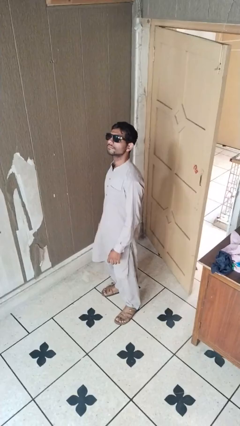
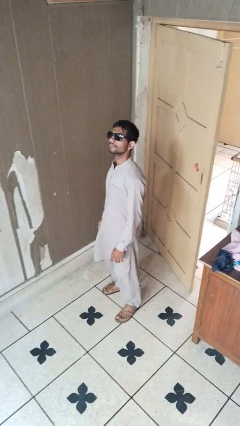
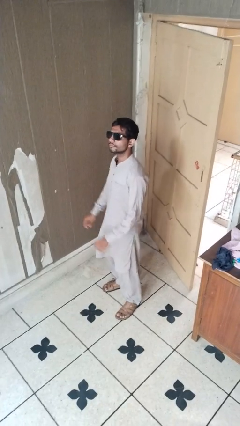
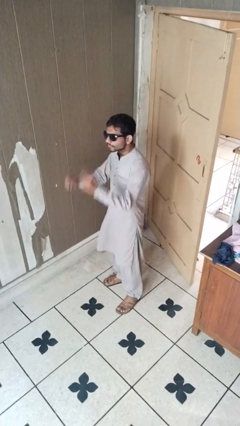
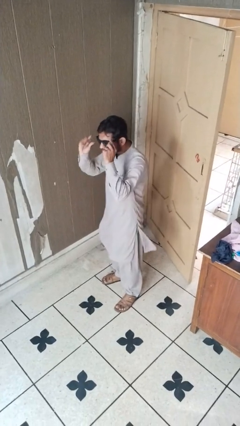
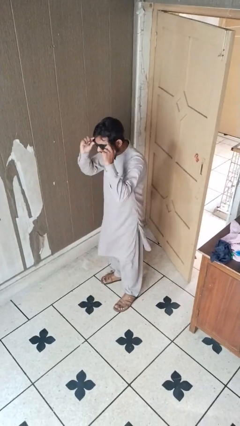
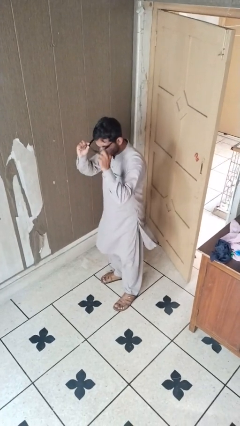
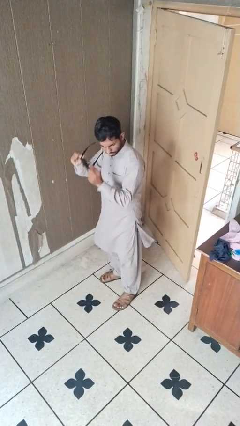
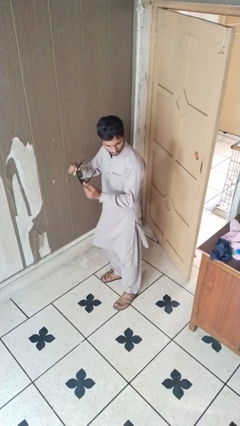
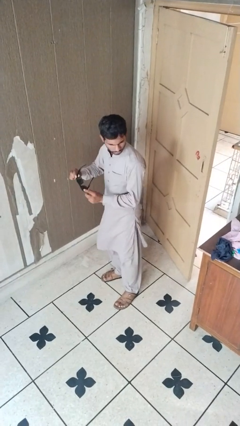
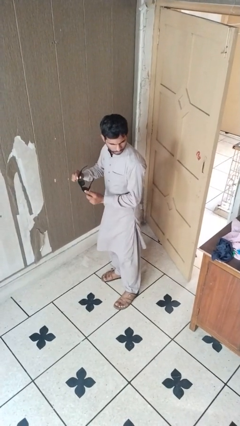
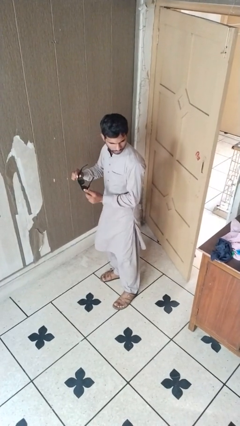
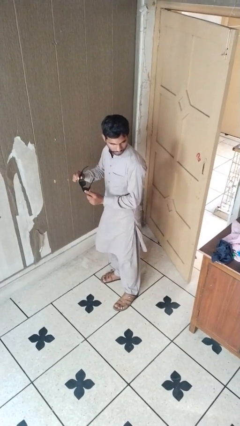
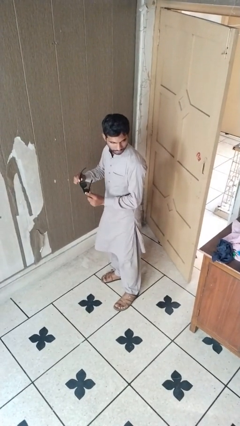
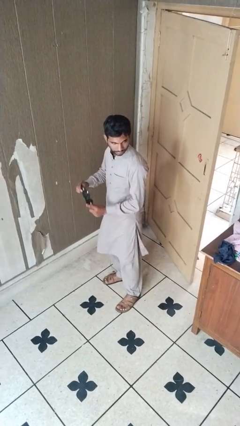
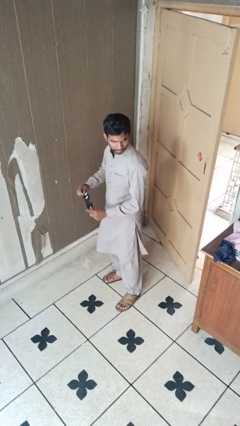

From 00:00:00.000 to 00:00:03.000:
person takes off sunglasses

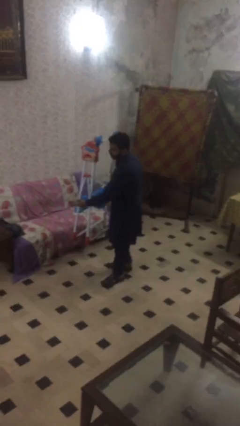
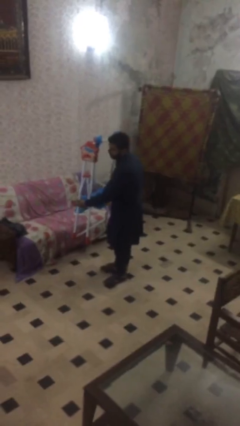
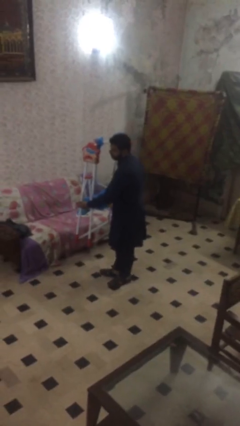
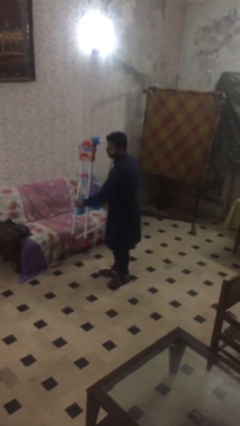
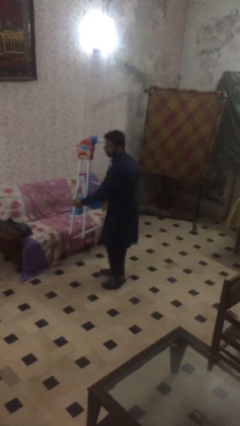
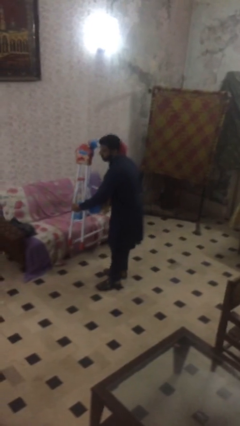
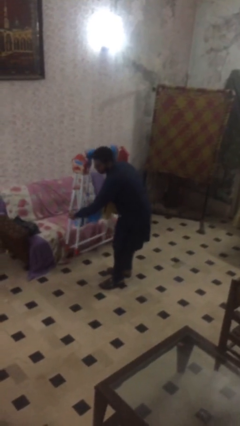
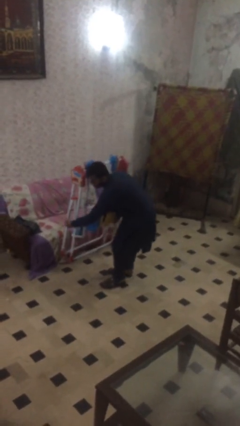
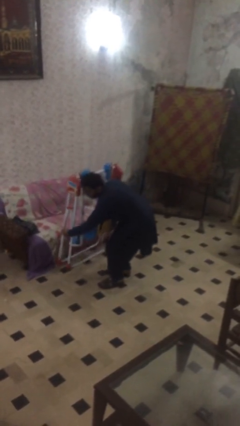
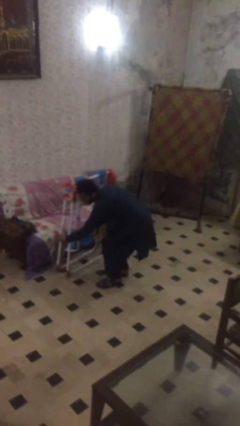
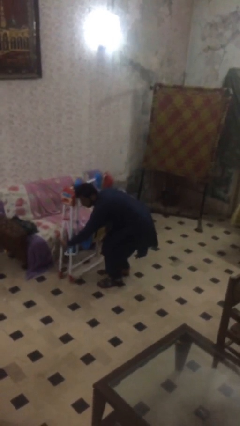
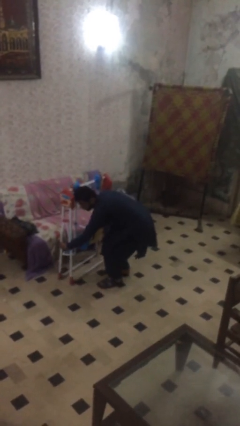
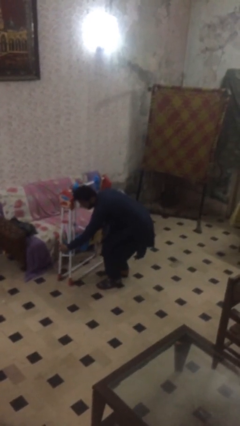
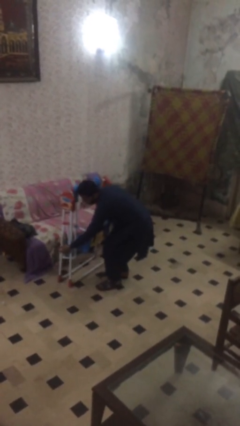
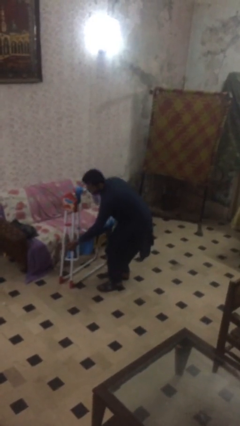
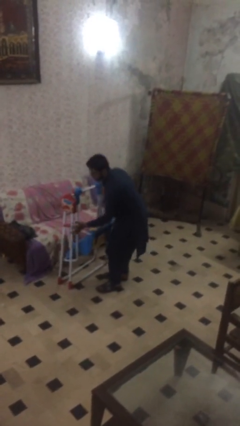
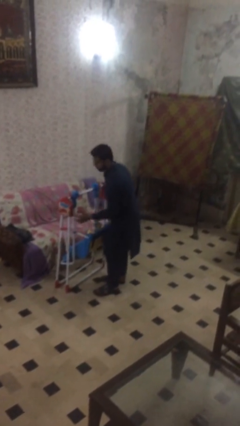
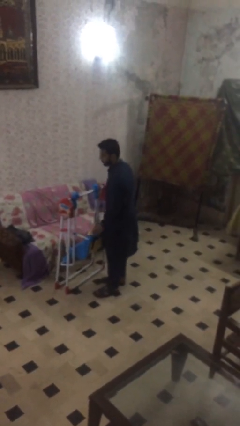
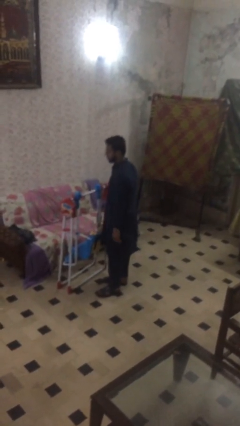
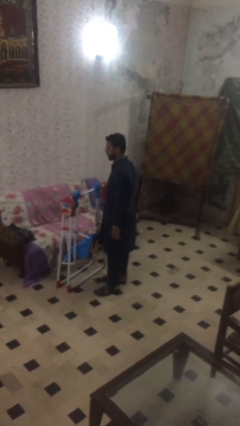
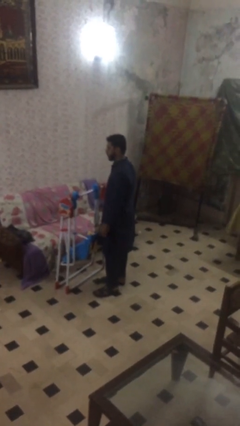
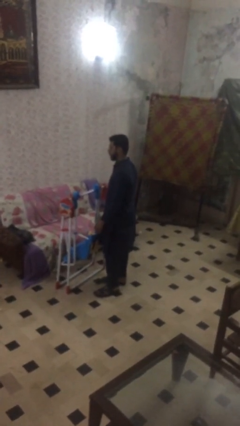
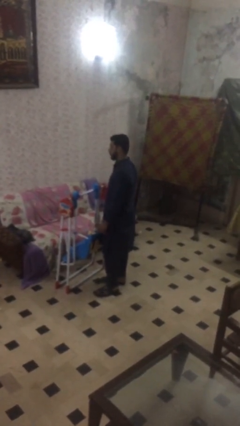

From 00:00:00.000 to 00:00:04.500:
person puts down object on floor

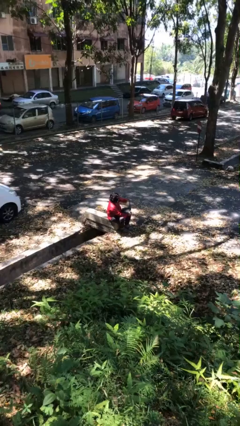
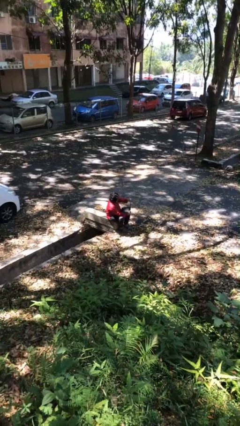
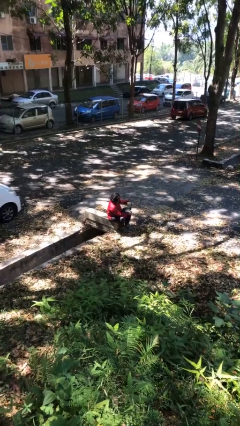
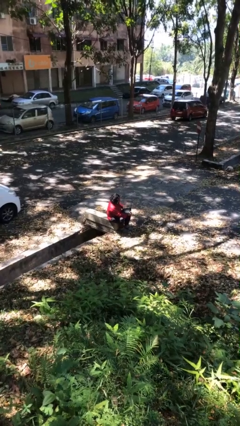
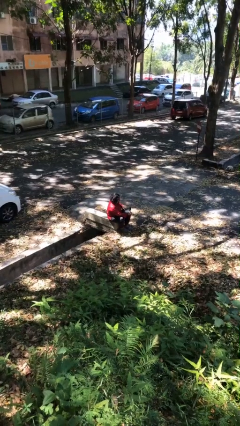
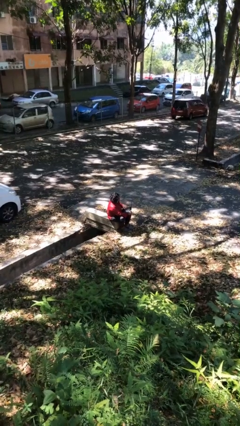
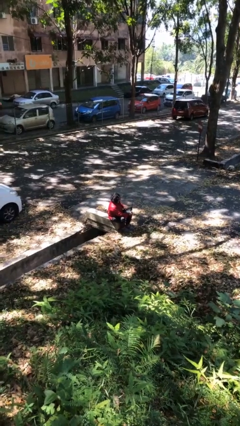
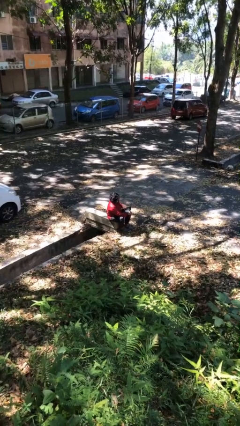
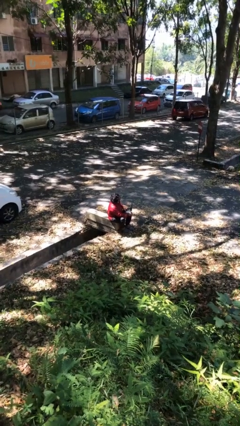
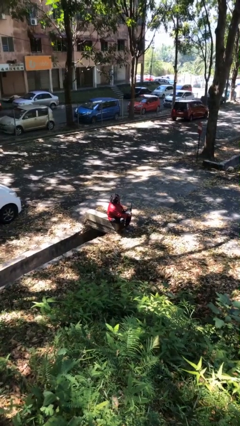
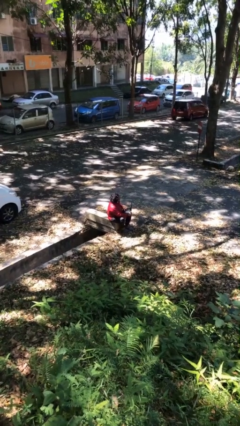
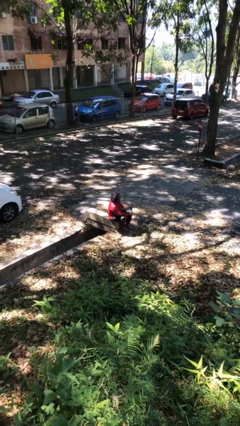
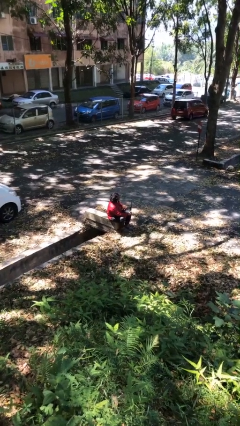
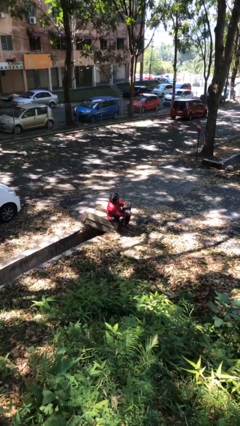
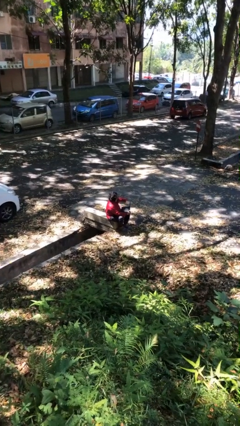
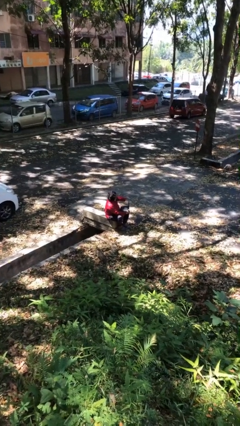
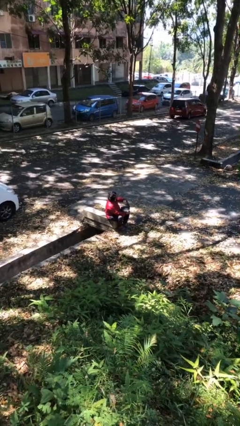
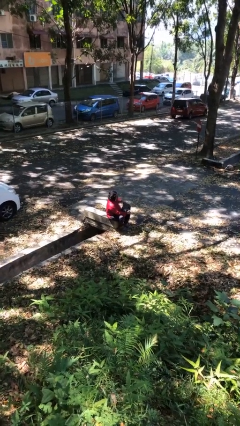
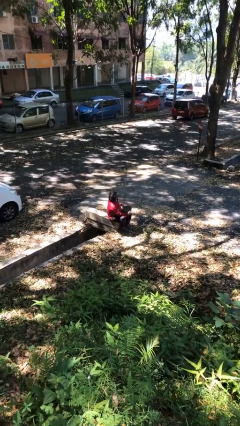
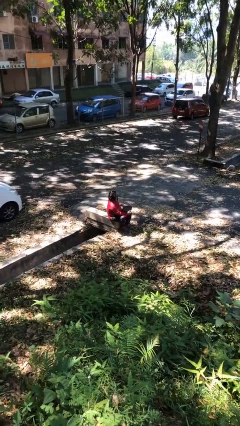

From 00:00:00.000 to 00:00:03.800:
person interacts with laptop

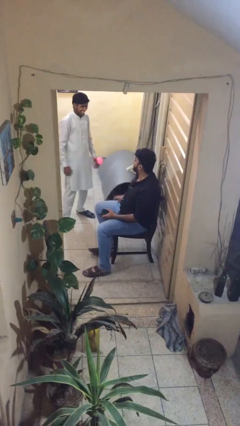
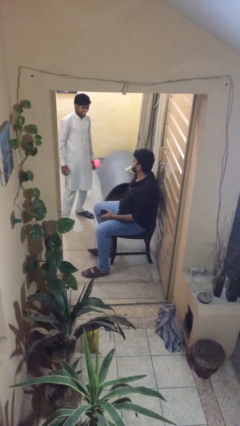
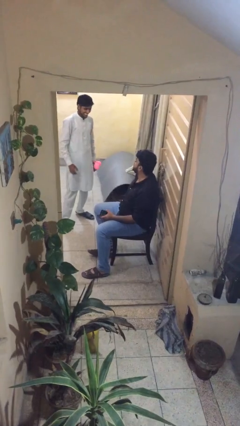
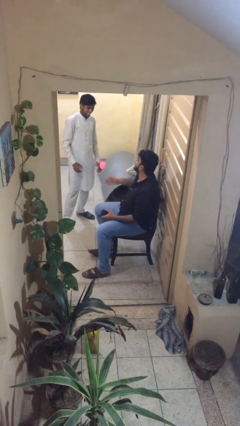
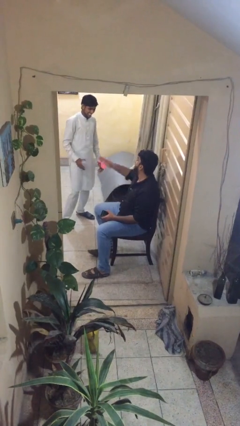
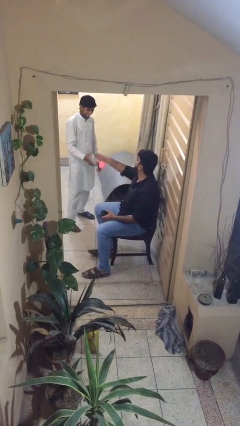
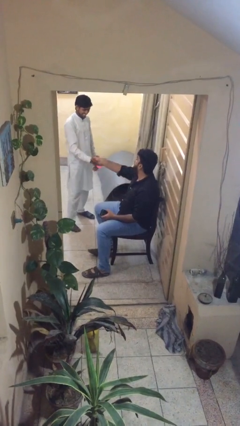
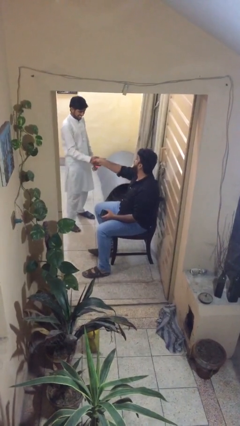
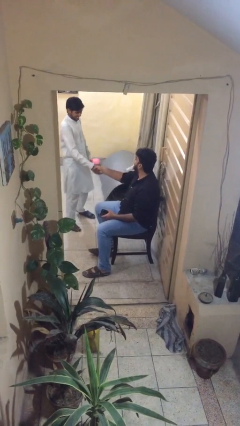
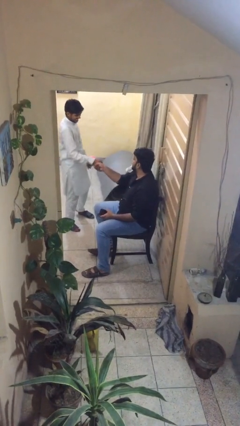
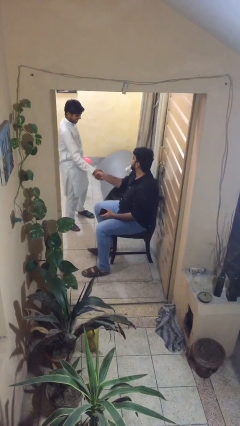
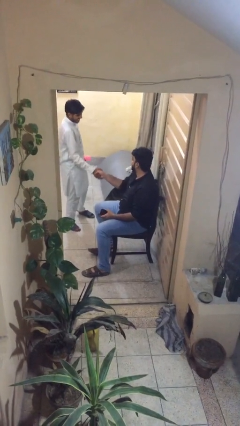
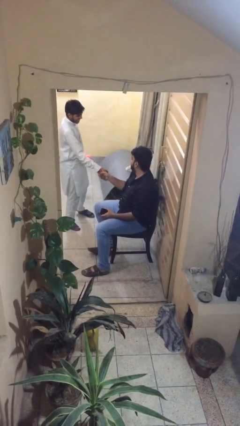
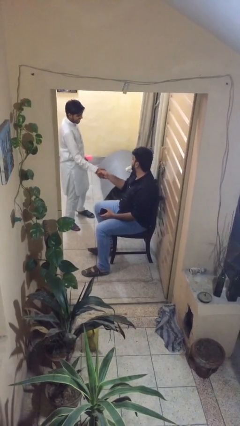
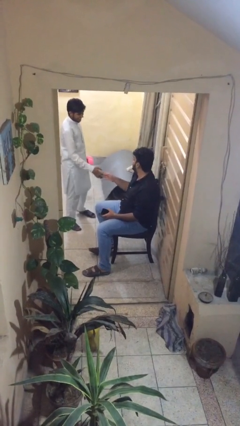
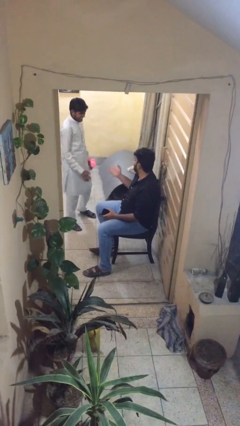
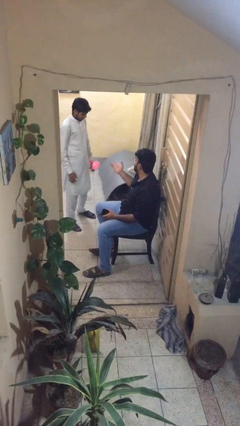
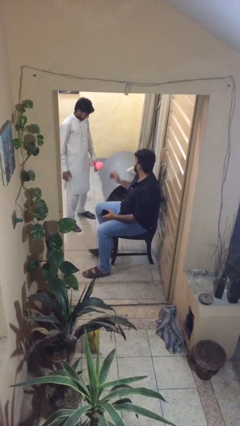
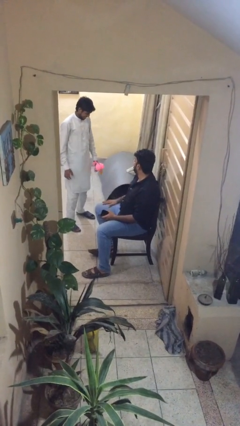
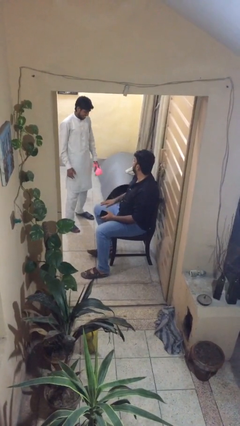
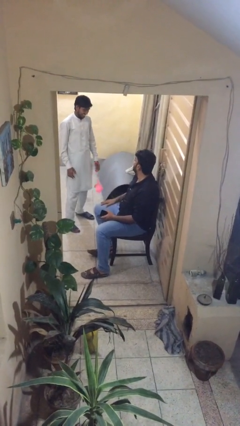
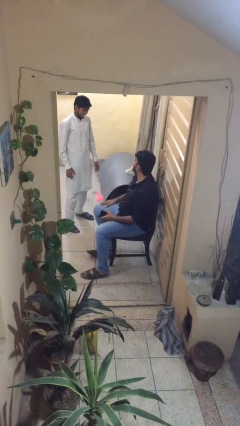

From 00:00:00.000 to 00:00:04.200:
person shakes hand

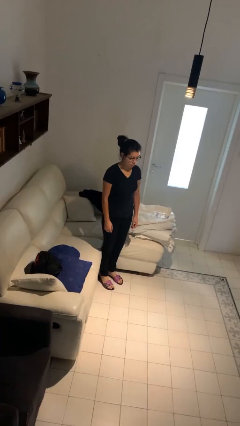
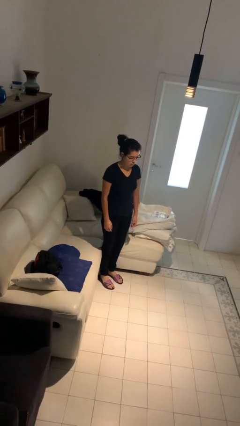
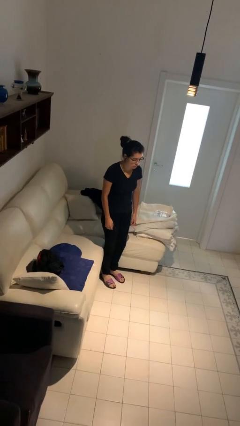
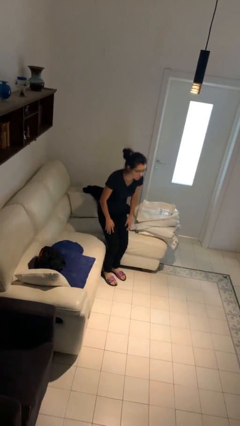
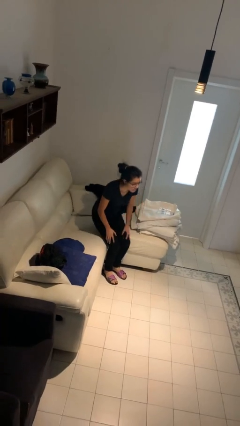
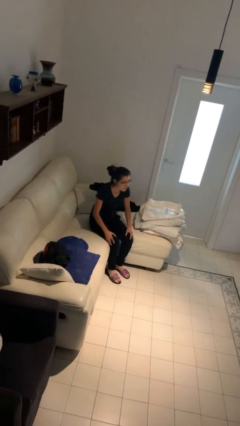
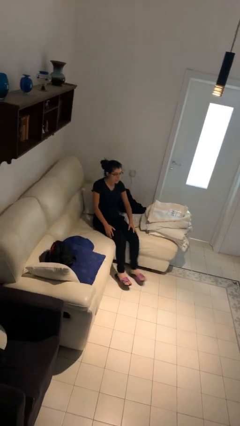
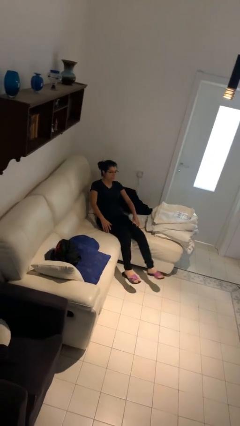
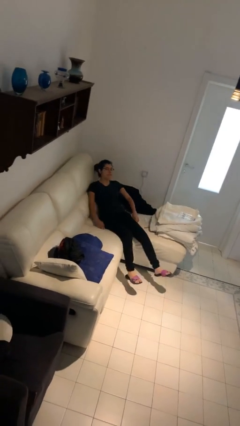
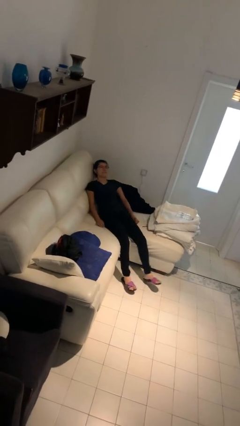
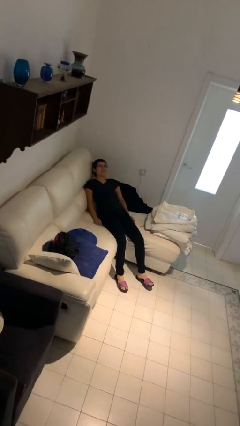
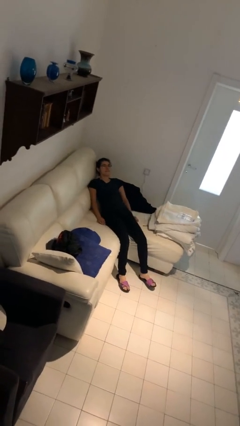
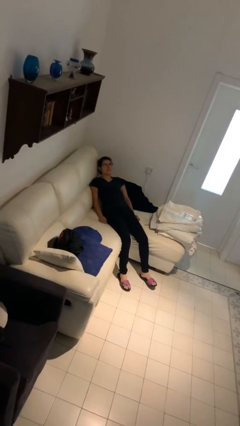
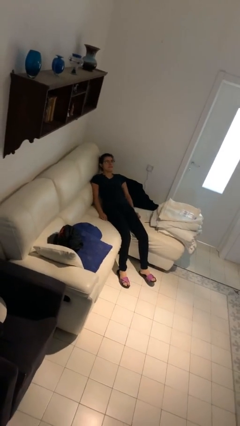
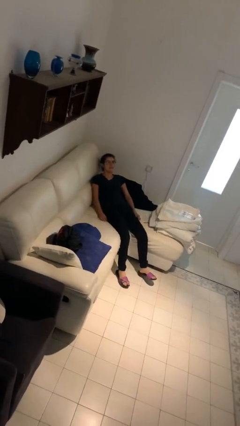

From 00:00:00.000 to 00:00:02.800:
person lies down on couch
